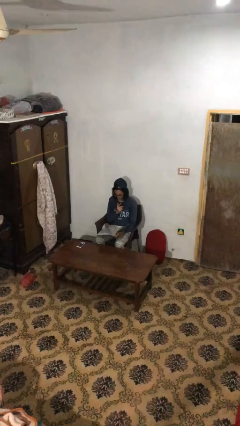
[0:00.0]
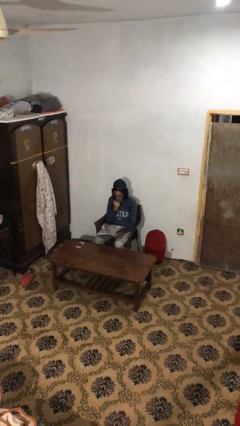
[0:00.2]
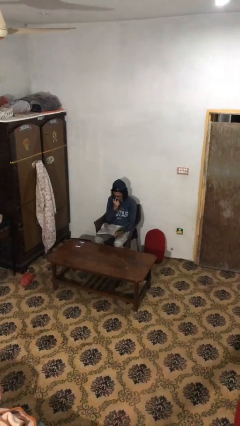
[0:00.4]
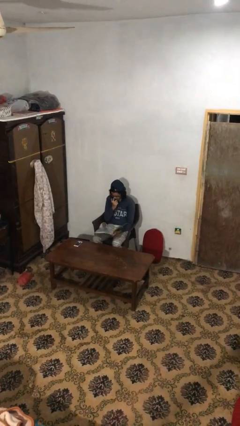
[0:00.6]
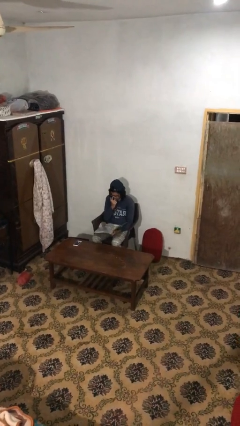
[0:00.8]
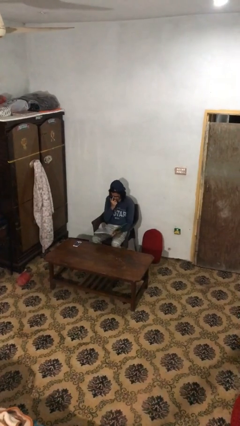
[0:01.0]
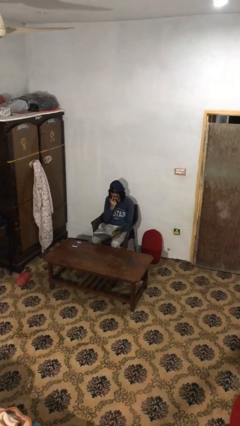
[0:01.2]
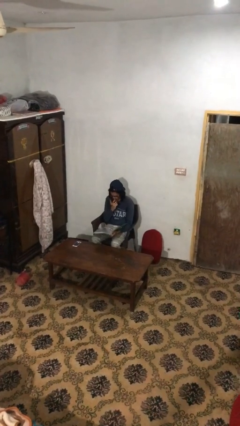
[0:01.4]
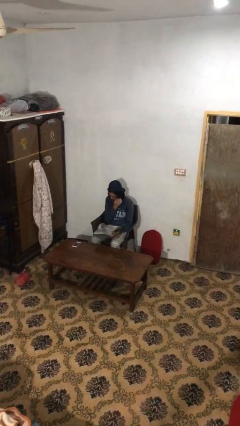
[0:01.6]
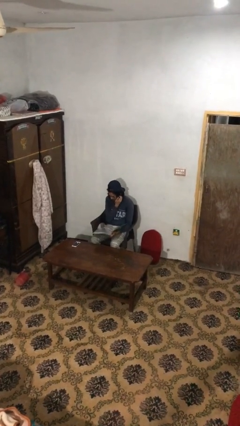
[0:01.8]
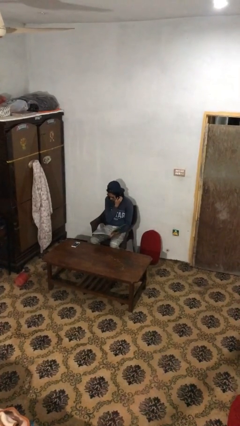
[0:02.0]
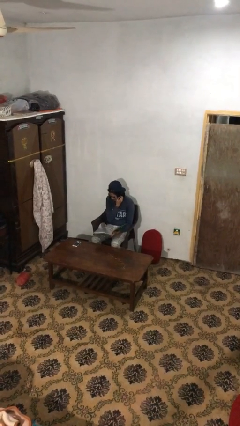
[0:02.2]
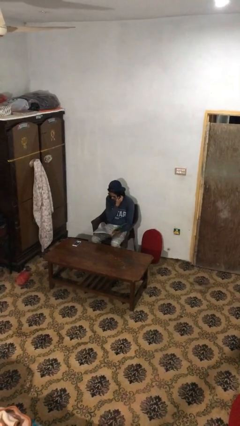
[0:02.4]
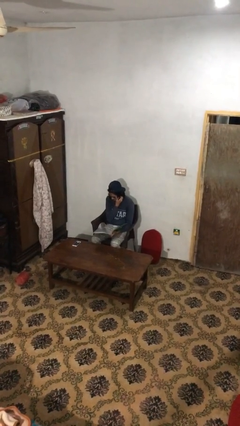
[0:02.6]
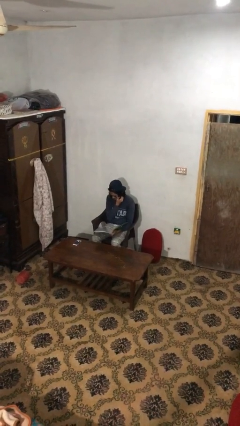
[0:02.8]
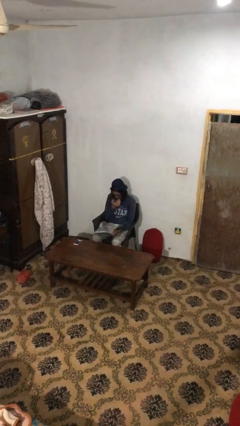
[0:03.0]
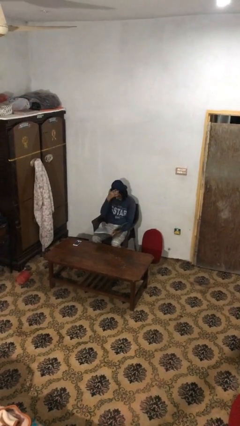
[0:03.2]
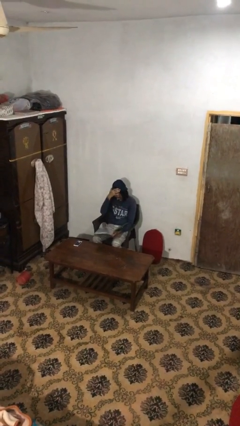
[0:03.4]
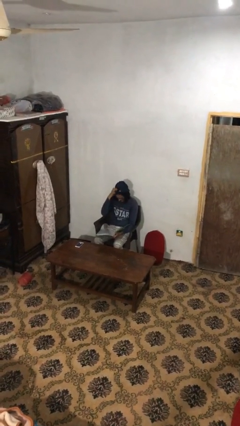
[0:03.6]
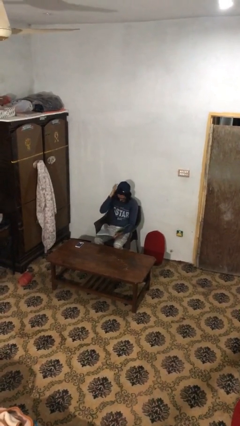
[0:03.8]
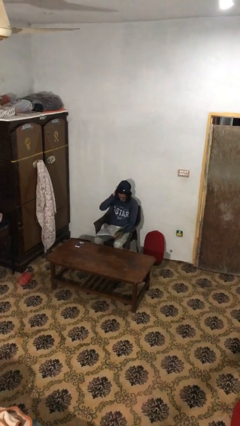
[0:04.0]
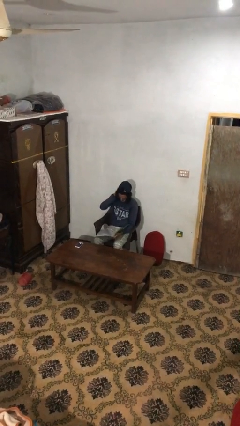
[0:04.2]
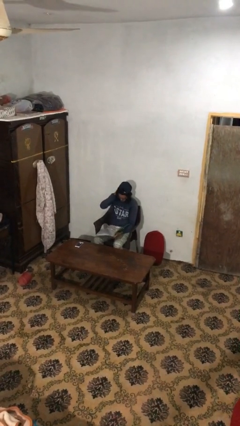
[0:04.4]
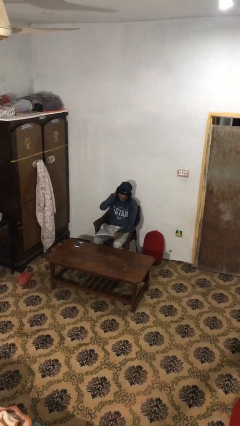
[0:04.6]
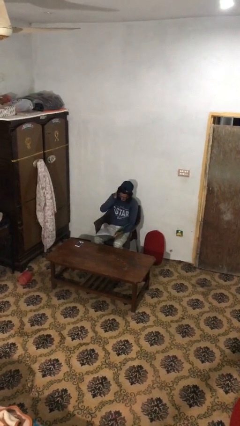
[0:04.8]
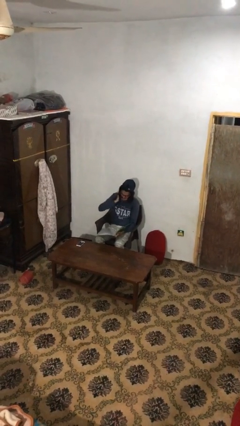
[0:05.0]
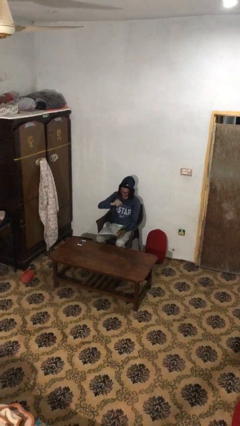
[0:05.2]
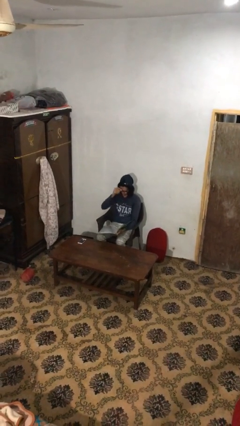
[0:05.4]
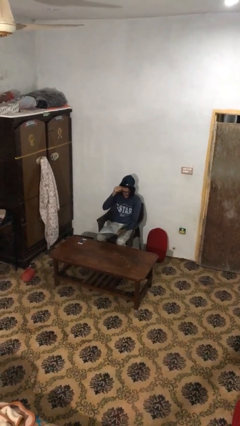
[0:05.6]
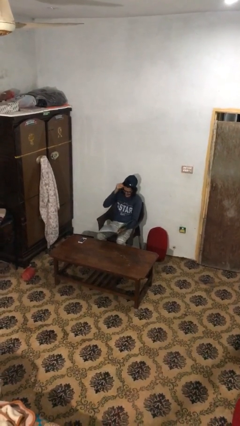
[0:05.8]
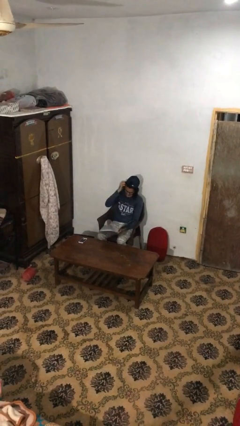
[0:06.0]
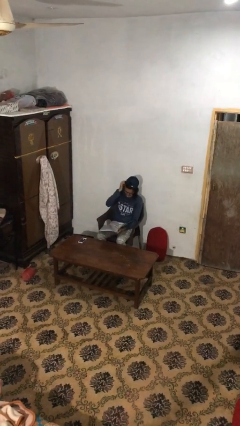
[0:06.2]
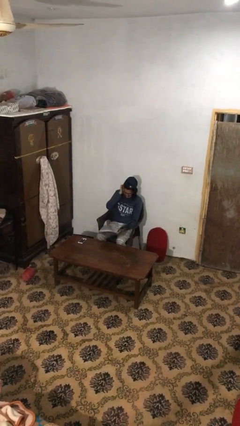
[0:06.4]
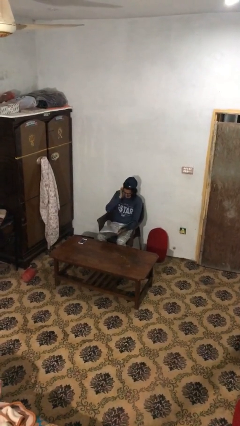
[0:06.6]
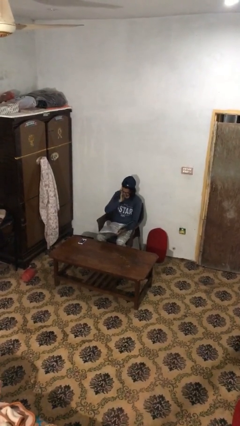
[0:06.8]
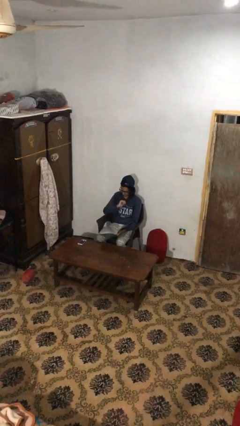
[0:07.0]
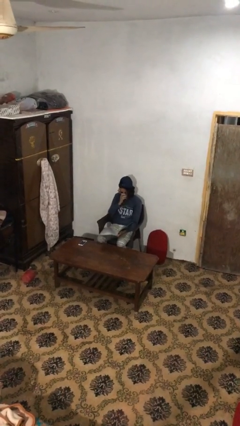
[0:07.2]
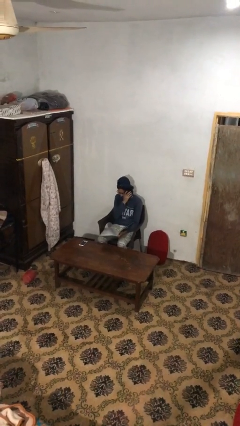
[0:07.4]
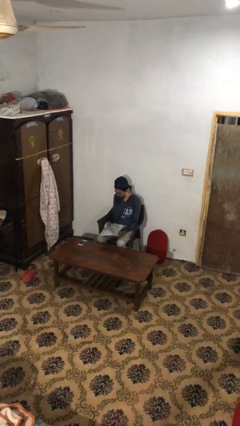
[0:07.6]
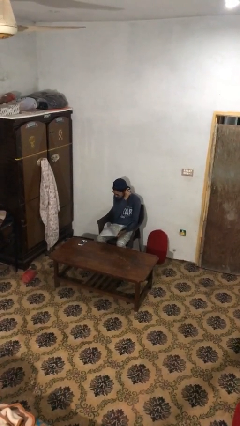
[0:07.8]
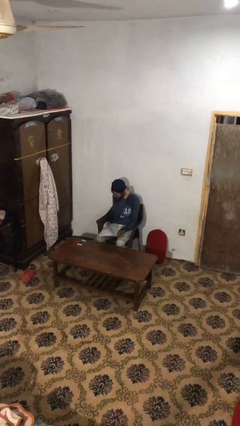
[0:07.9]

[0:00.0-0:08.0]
person reads document

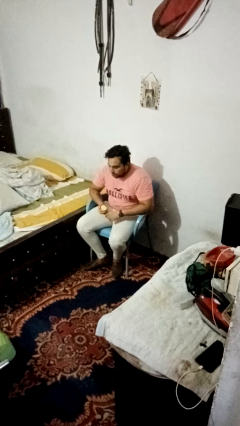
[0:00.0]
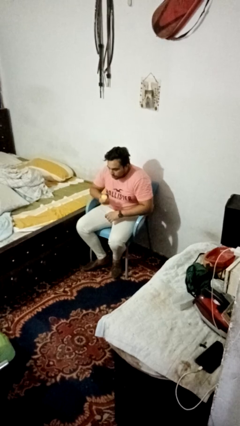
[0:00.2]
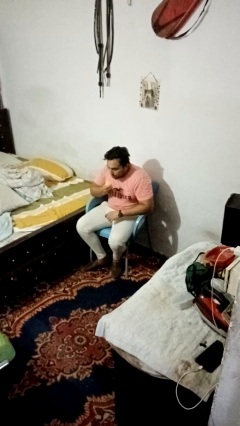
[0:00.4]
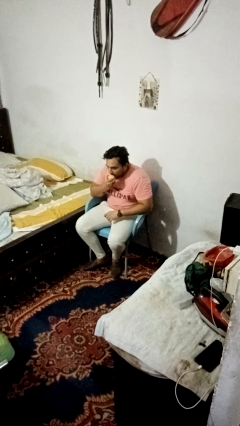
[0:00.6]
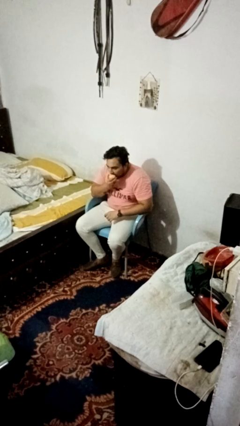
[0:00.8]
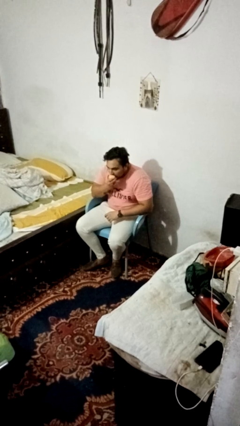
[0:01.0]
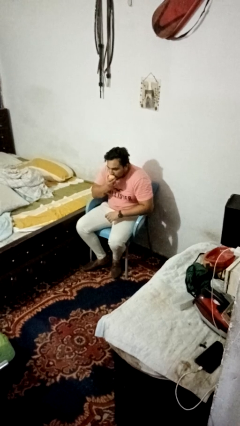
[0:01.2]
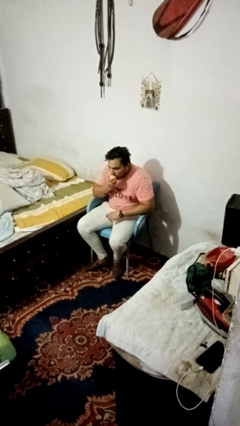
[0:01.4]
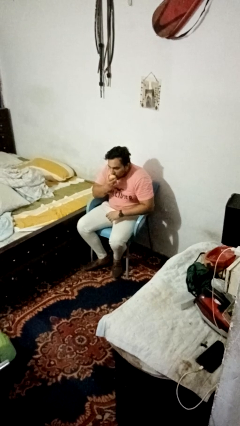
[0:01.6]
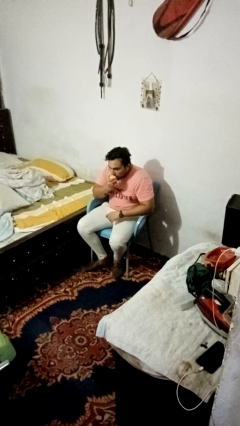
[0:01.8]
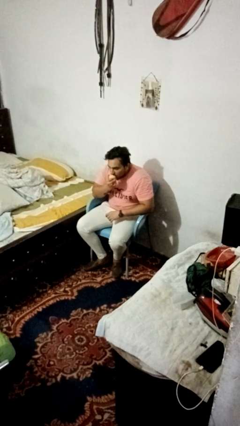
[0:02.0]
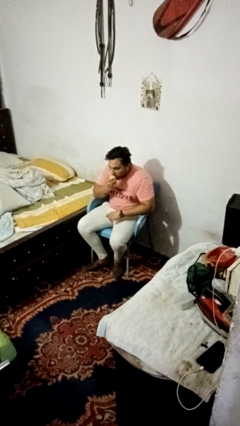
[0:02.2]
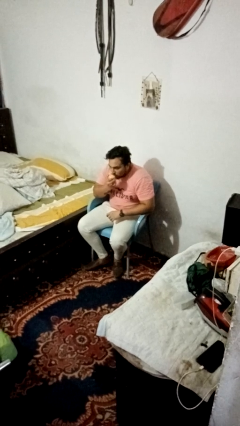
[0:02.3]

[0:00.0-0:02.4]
person eats apple

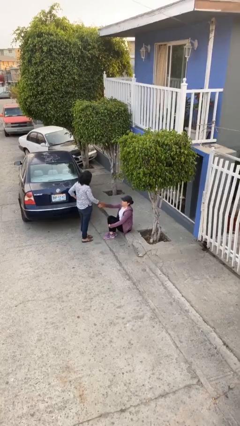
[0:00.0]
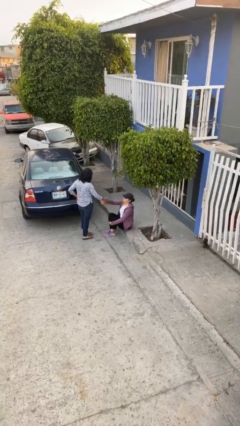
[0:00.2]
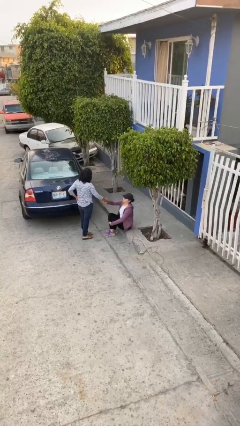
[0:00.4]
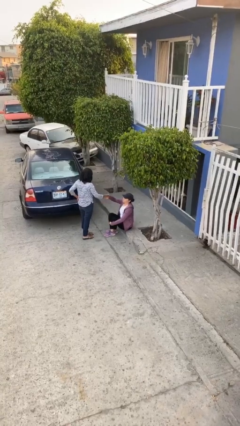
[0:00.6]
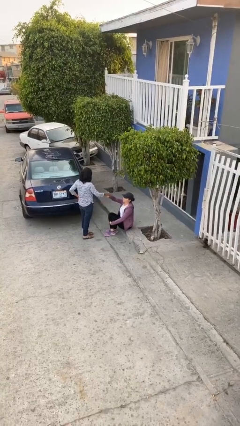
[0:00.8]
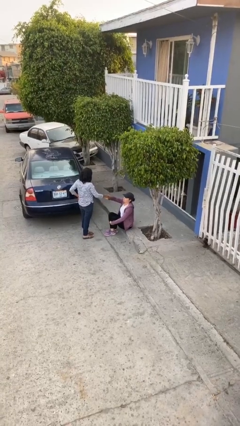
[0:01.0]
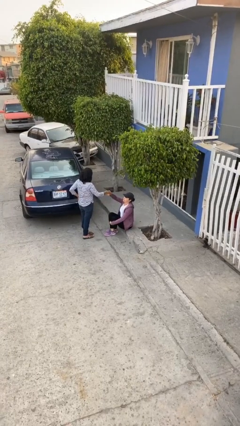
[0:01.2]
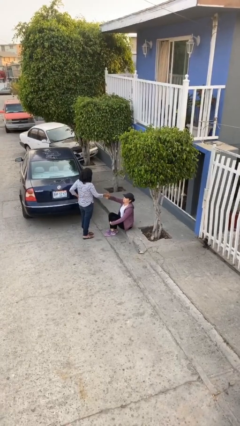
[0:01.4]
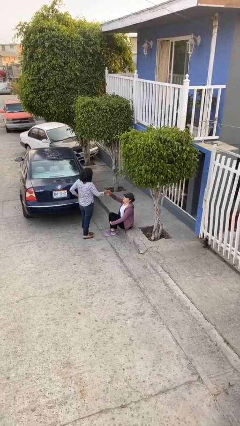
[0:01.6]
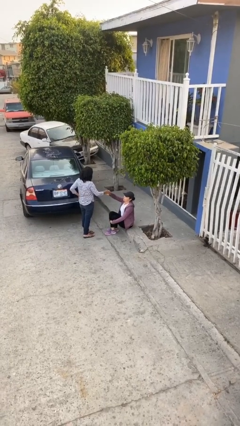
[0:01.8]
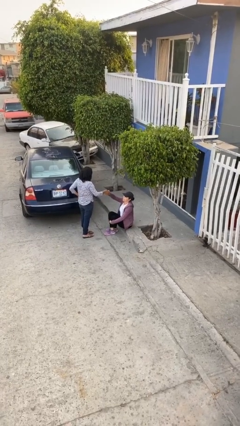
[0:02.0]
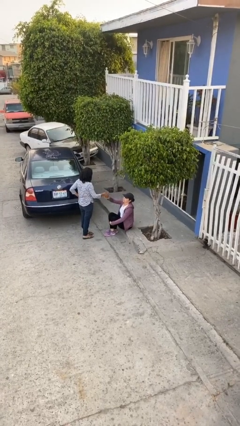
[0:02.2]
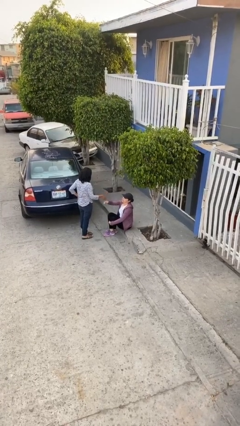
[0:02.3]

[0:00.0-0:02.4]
person shakes hand

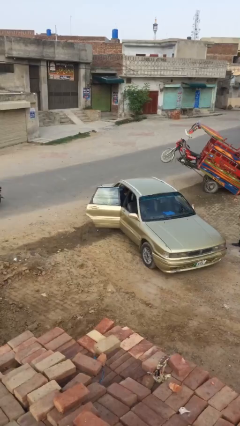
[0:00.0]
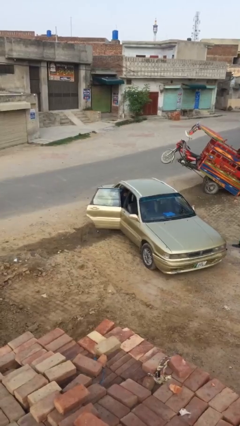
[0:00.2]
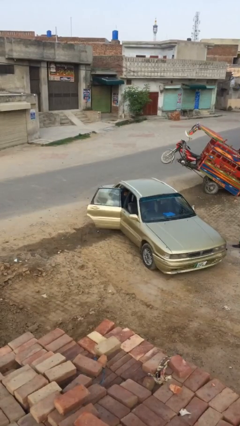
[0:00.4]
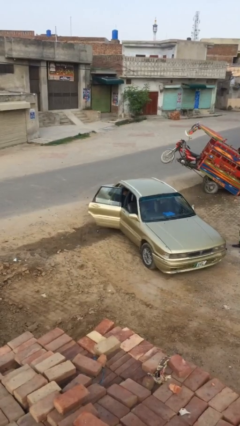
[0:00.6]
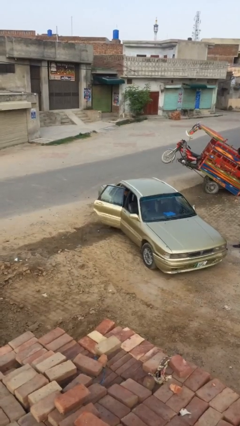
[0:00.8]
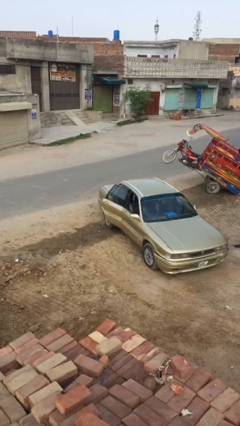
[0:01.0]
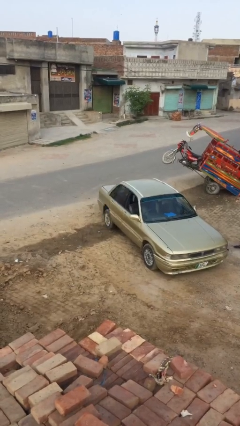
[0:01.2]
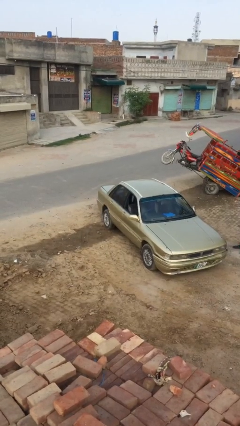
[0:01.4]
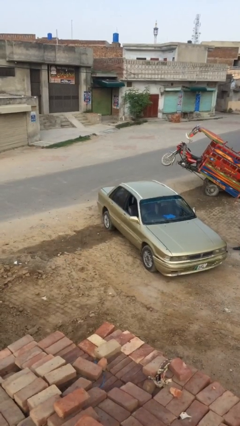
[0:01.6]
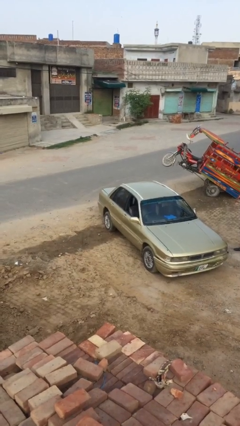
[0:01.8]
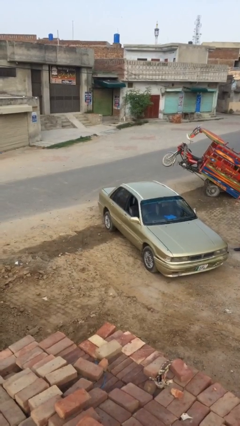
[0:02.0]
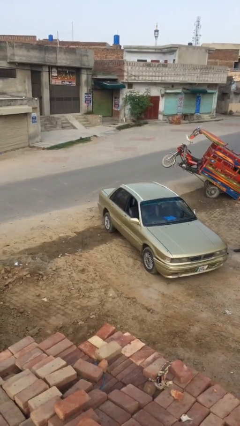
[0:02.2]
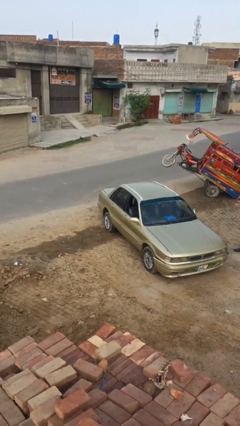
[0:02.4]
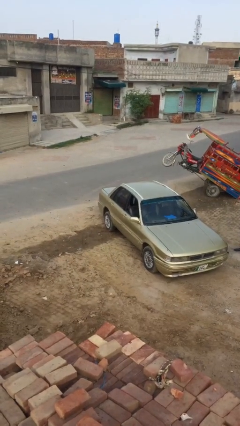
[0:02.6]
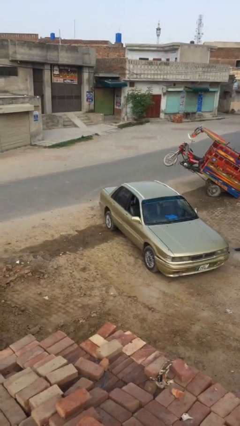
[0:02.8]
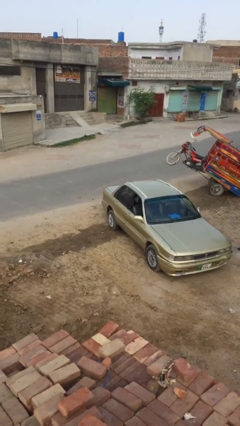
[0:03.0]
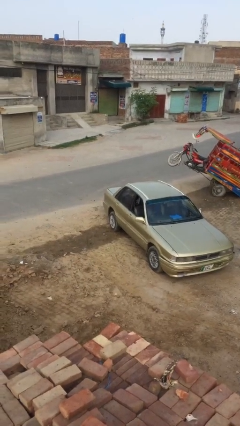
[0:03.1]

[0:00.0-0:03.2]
person closes car door

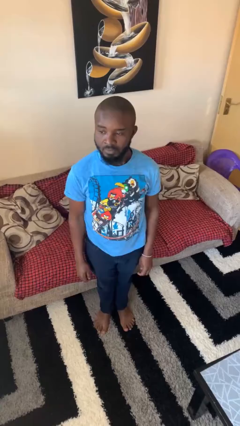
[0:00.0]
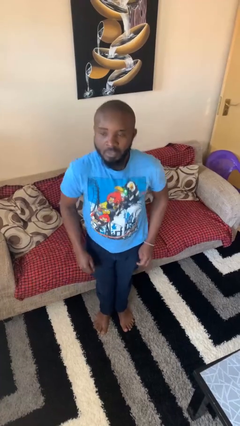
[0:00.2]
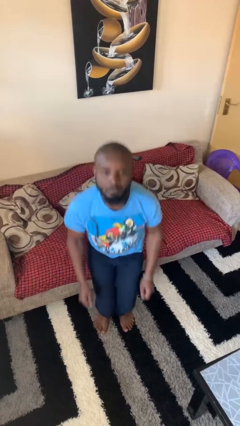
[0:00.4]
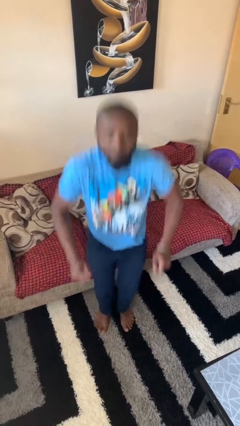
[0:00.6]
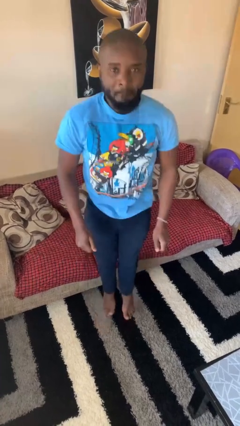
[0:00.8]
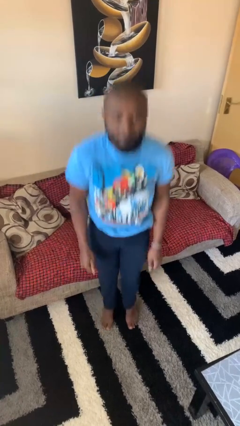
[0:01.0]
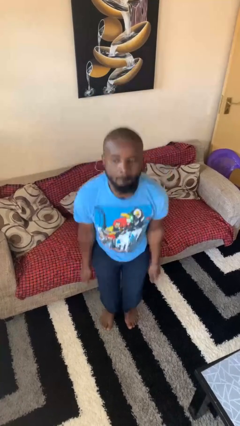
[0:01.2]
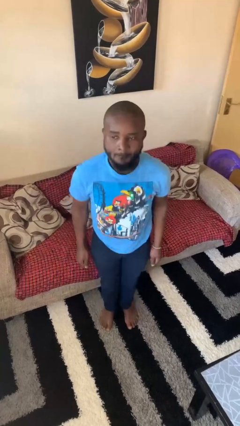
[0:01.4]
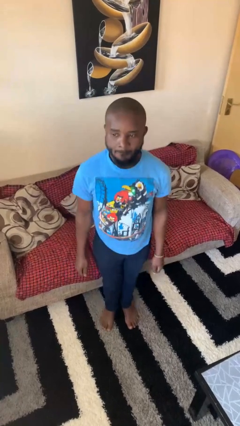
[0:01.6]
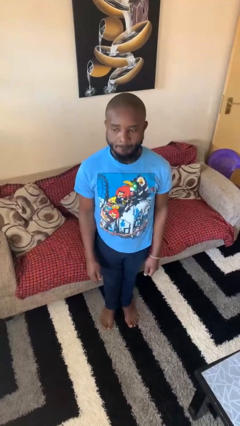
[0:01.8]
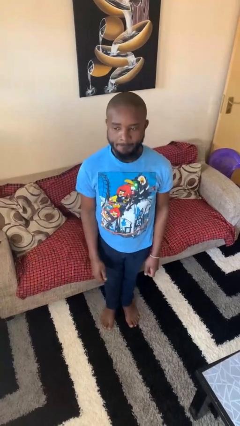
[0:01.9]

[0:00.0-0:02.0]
person jumps
